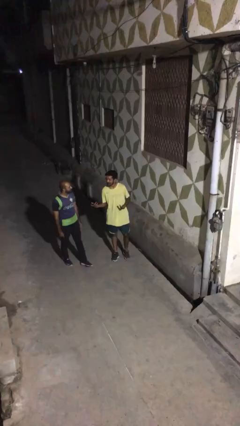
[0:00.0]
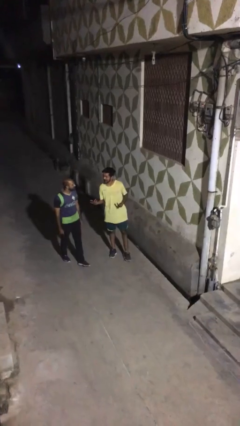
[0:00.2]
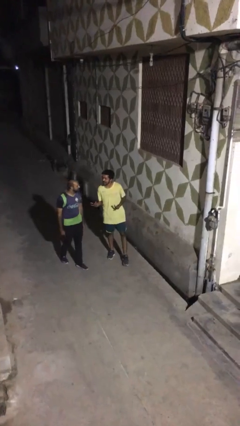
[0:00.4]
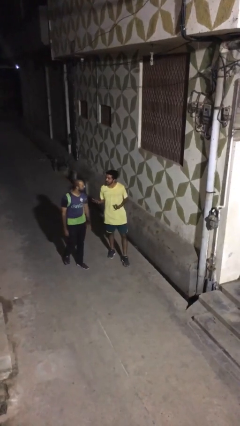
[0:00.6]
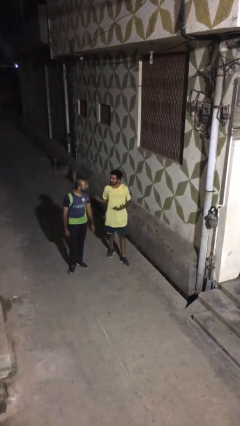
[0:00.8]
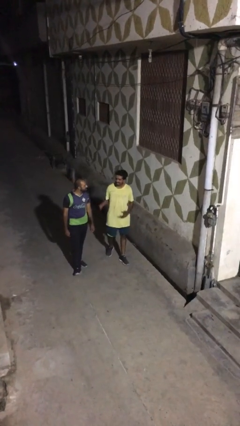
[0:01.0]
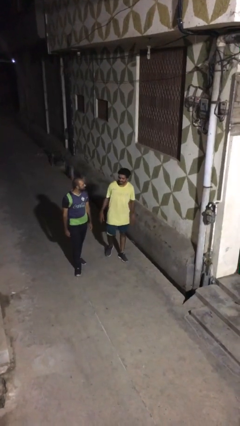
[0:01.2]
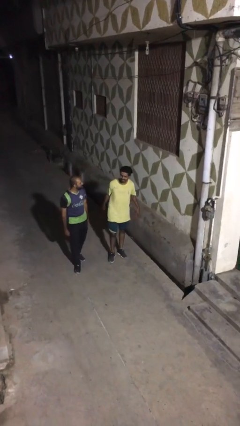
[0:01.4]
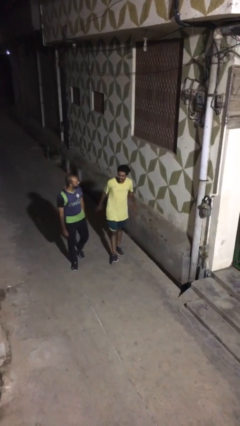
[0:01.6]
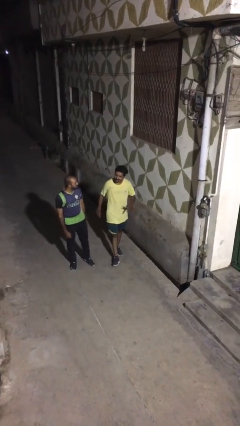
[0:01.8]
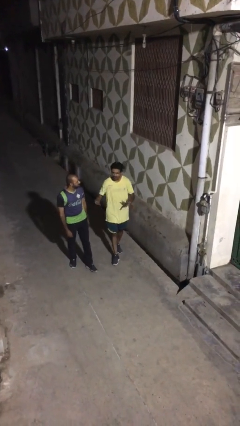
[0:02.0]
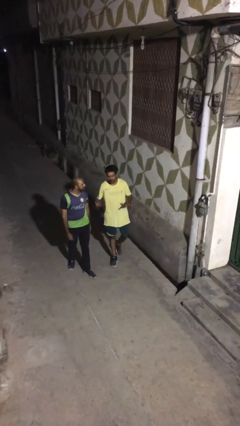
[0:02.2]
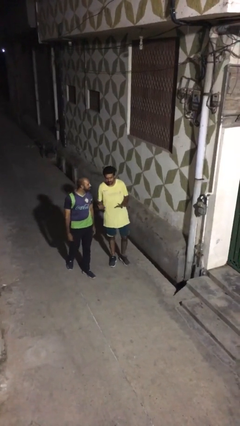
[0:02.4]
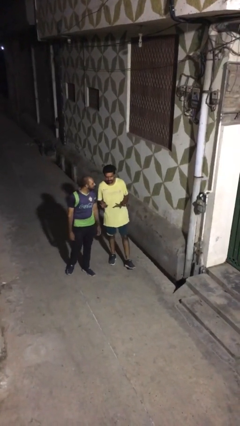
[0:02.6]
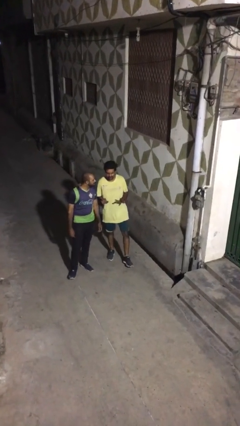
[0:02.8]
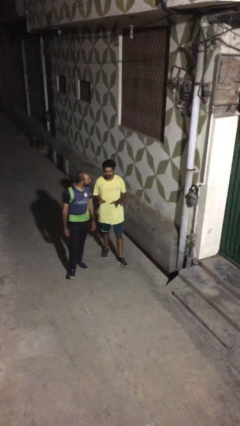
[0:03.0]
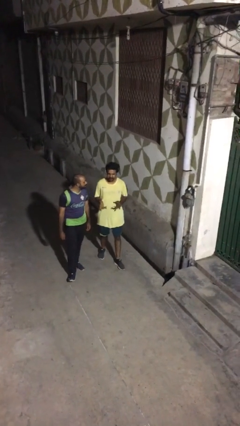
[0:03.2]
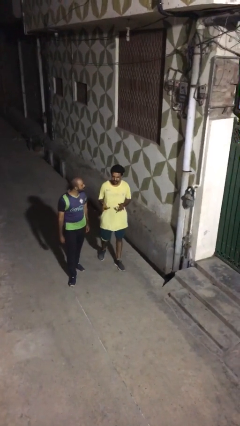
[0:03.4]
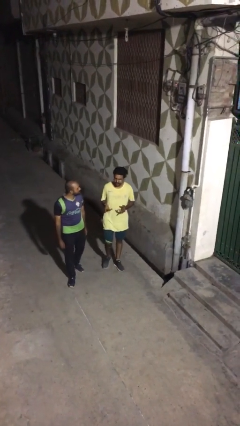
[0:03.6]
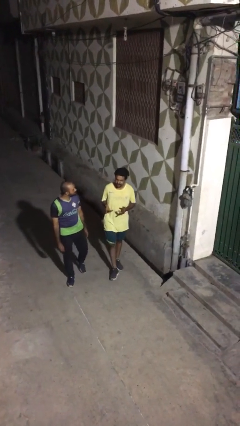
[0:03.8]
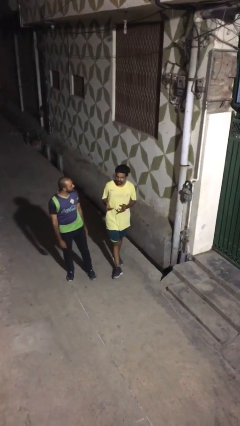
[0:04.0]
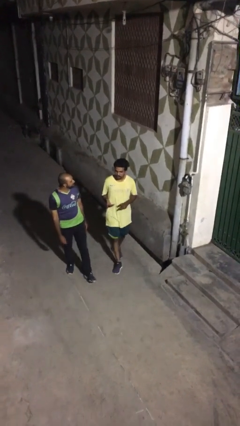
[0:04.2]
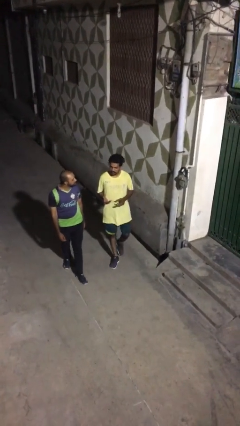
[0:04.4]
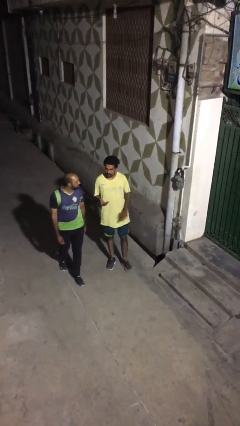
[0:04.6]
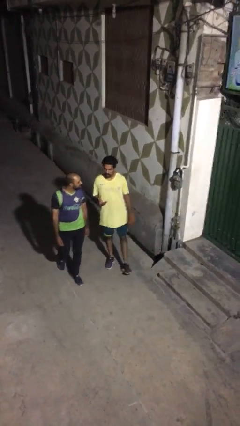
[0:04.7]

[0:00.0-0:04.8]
person talks to person

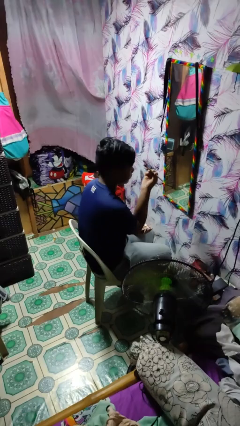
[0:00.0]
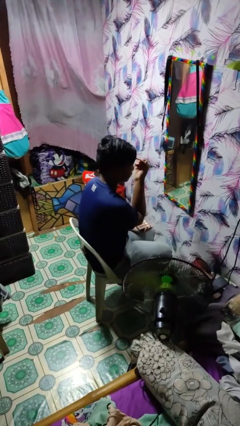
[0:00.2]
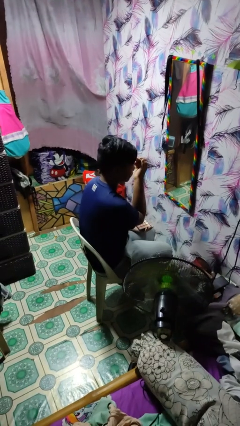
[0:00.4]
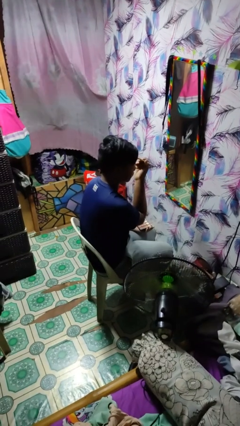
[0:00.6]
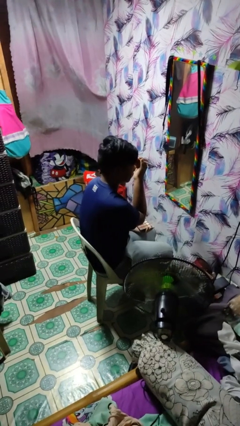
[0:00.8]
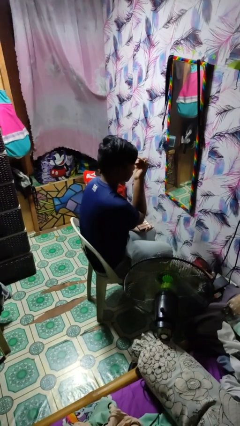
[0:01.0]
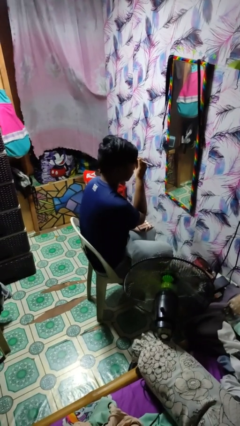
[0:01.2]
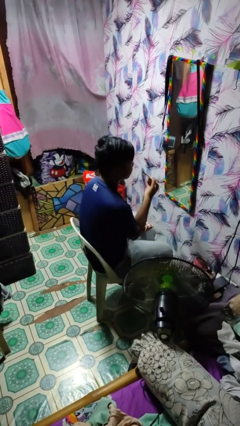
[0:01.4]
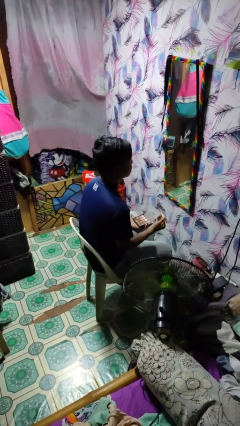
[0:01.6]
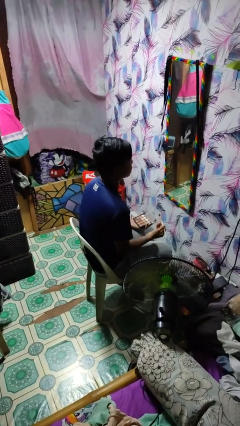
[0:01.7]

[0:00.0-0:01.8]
person applies eye makeup

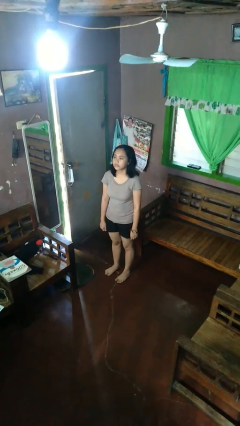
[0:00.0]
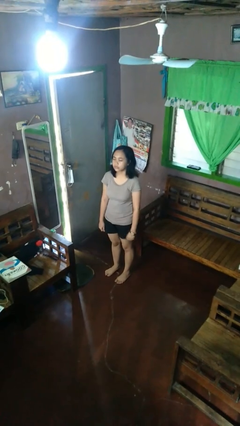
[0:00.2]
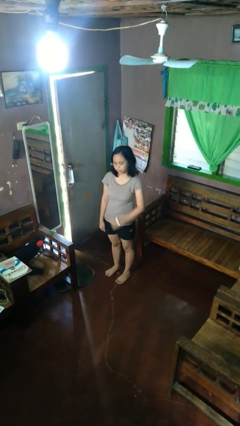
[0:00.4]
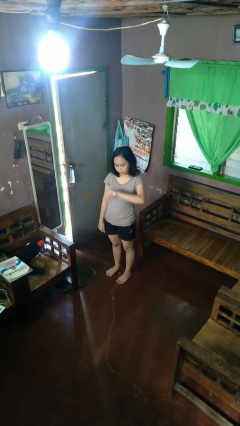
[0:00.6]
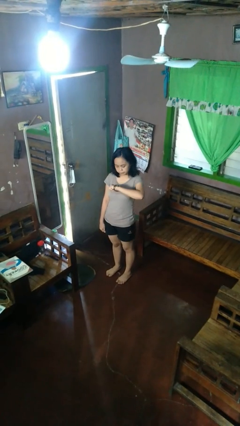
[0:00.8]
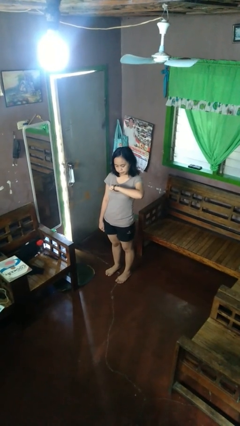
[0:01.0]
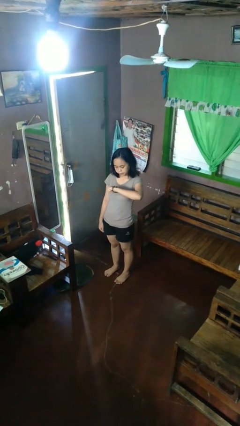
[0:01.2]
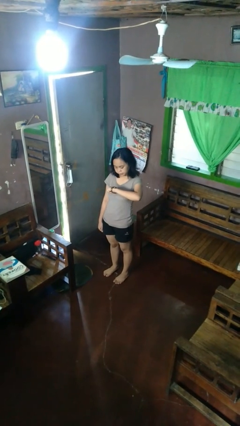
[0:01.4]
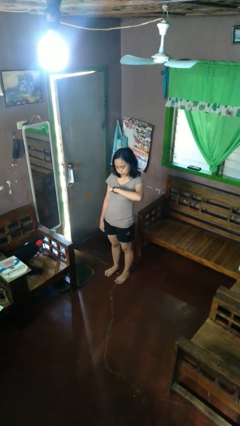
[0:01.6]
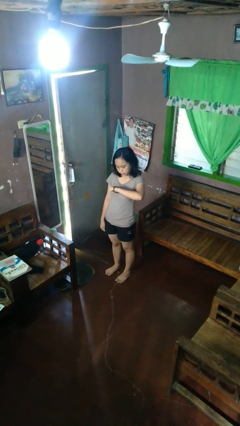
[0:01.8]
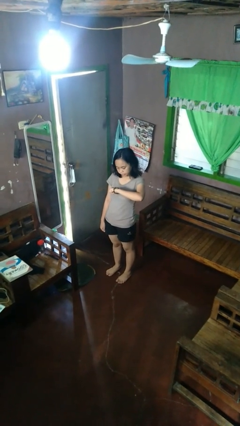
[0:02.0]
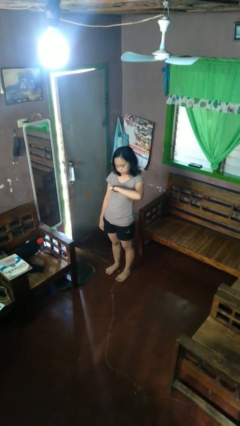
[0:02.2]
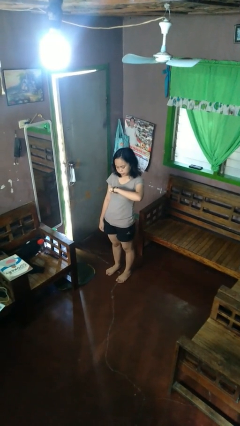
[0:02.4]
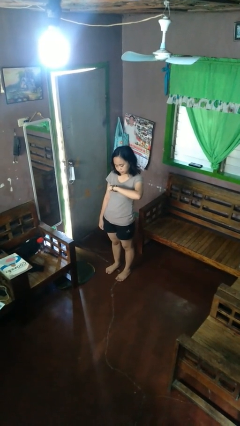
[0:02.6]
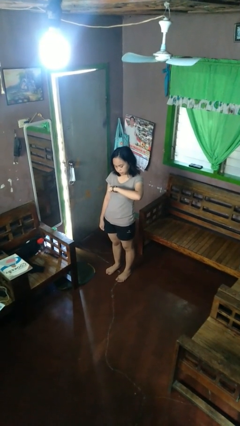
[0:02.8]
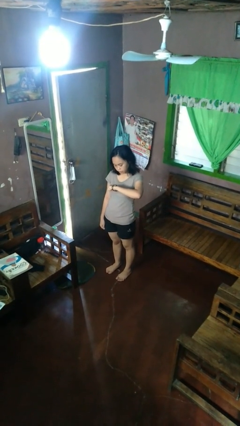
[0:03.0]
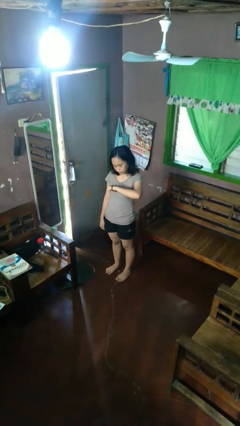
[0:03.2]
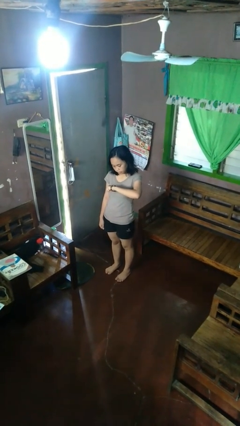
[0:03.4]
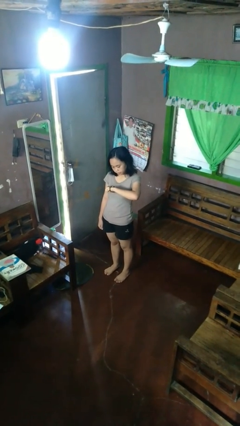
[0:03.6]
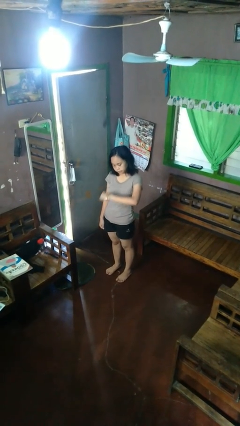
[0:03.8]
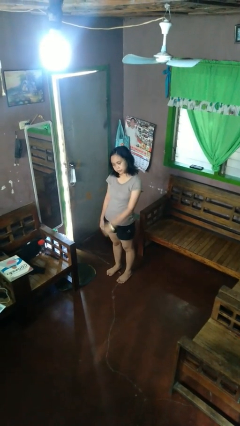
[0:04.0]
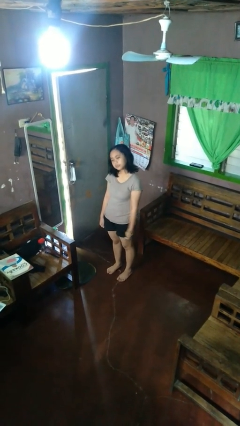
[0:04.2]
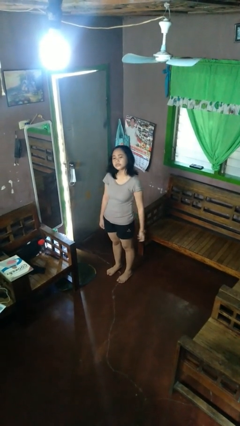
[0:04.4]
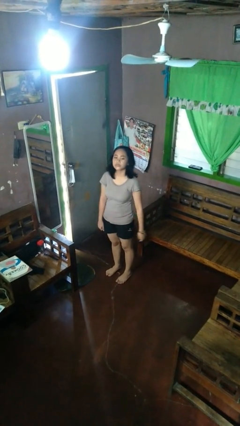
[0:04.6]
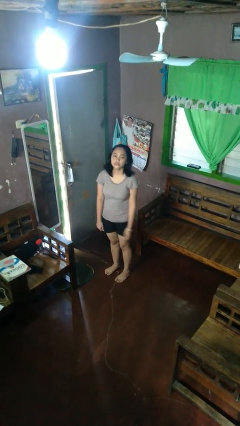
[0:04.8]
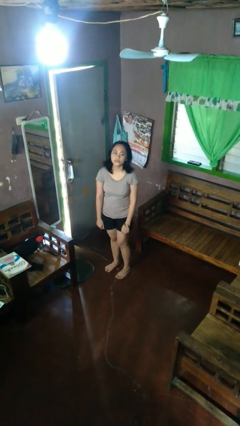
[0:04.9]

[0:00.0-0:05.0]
person looks at wristwatch

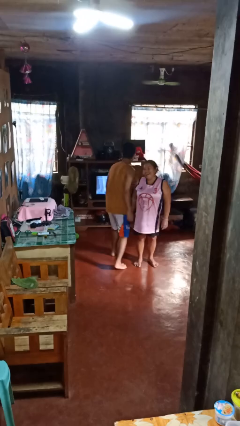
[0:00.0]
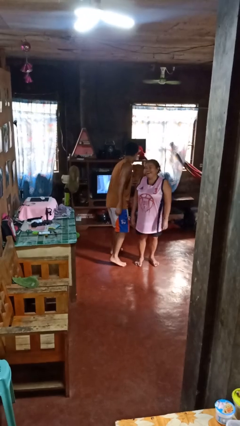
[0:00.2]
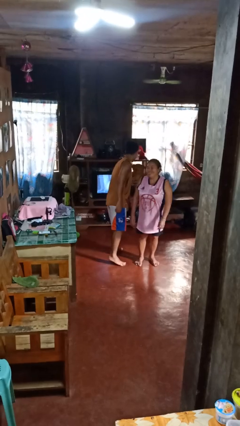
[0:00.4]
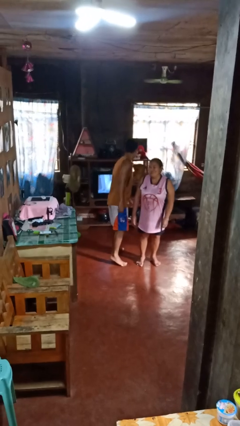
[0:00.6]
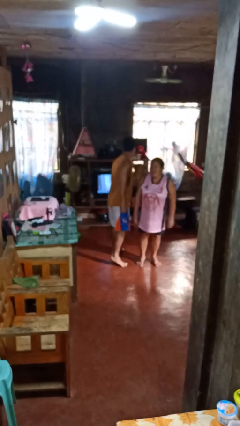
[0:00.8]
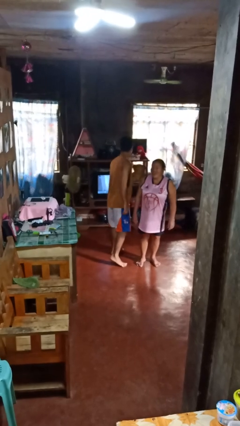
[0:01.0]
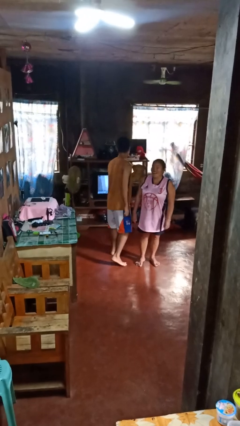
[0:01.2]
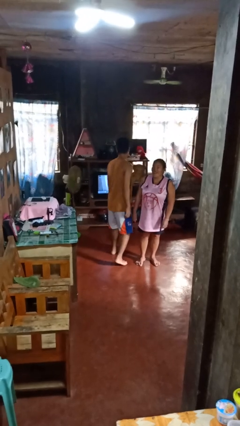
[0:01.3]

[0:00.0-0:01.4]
person bumps into person

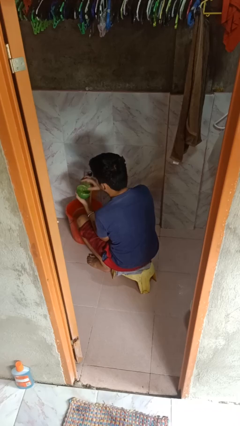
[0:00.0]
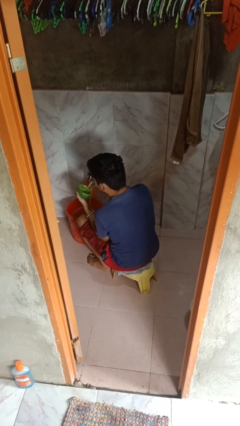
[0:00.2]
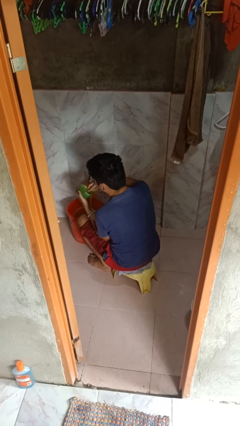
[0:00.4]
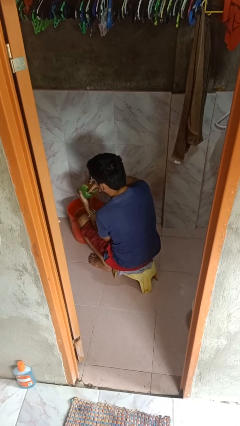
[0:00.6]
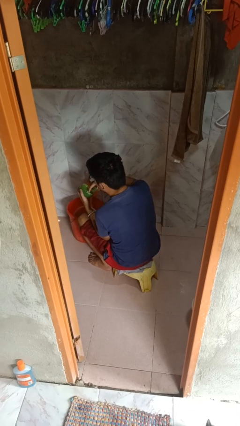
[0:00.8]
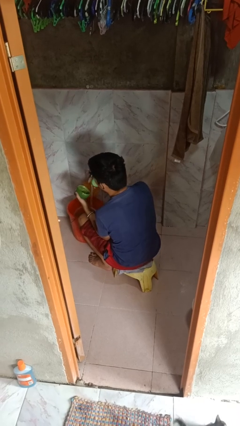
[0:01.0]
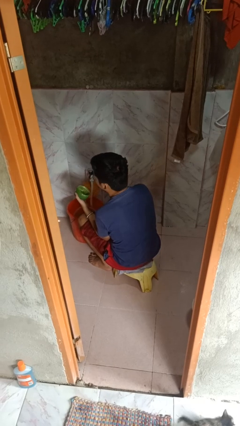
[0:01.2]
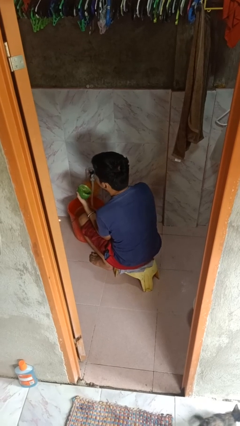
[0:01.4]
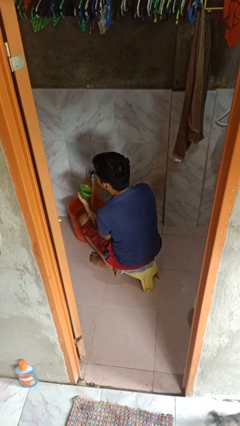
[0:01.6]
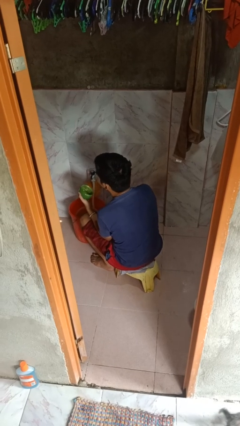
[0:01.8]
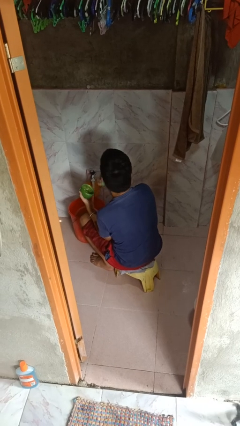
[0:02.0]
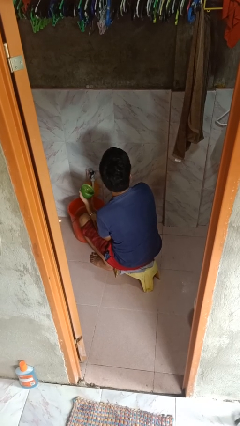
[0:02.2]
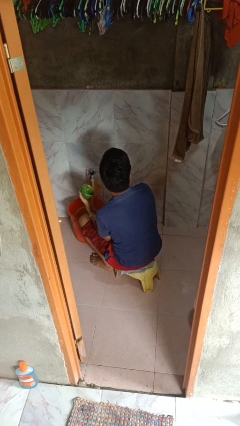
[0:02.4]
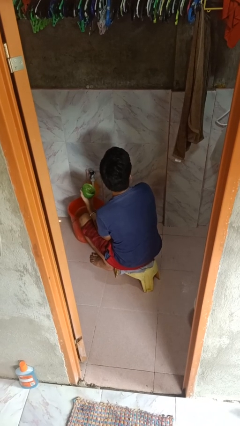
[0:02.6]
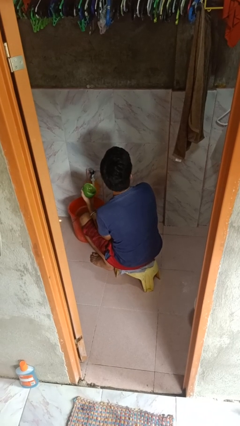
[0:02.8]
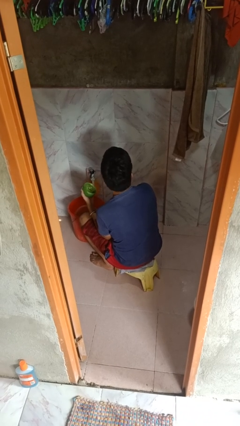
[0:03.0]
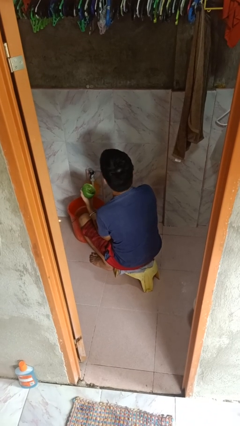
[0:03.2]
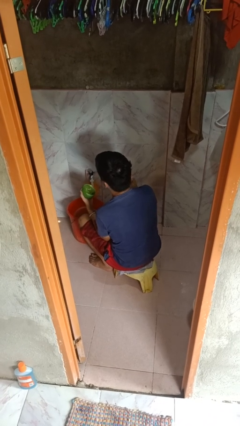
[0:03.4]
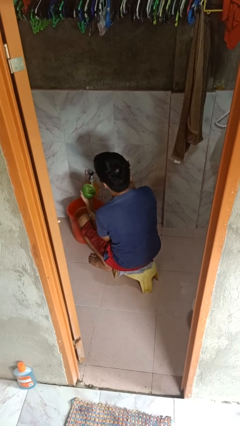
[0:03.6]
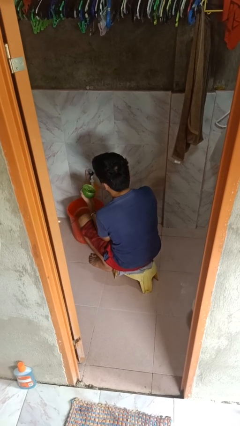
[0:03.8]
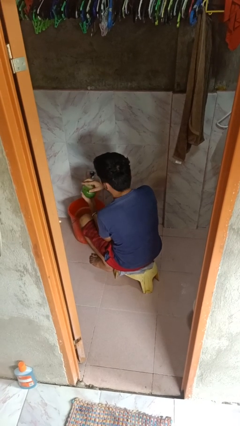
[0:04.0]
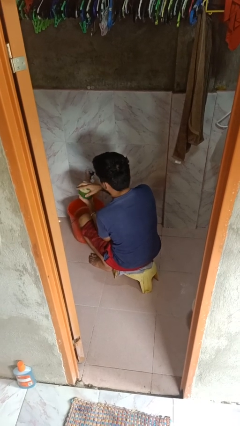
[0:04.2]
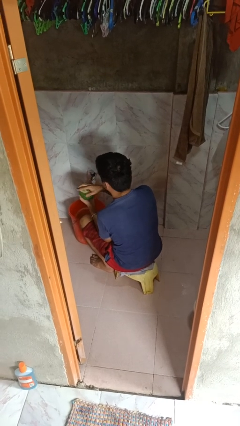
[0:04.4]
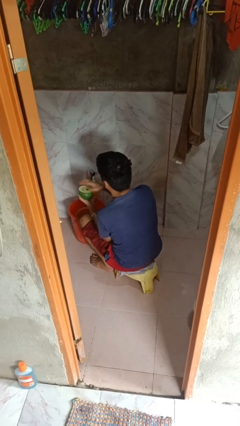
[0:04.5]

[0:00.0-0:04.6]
person applies facial moisturizer
